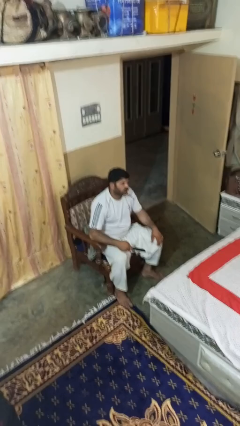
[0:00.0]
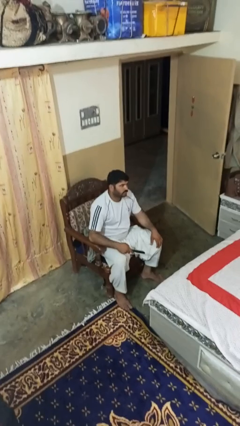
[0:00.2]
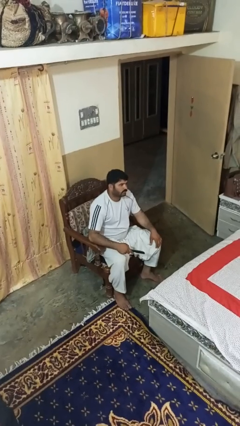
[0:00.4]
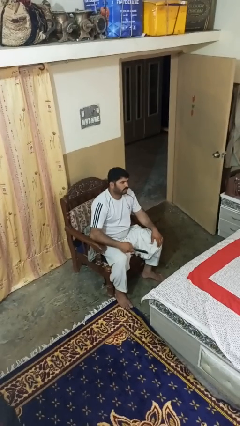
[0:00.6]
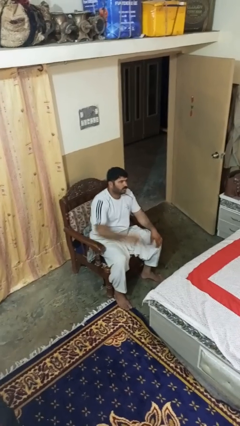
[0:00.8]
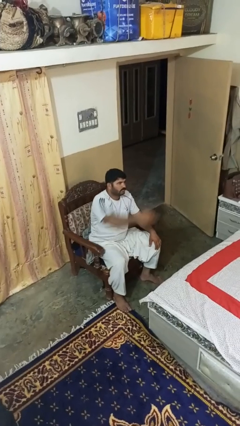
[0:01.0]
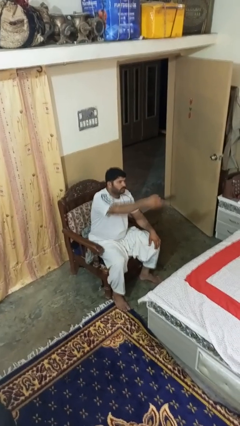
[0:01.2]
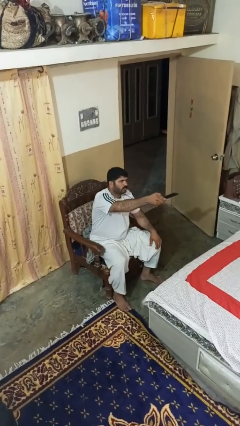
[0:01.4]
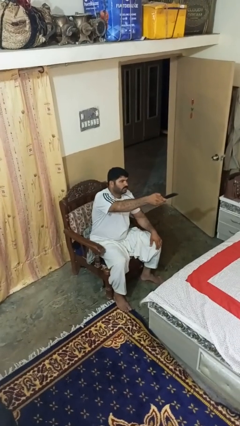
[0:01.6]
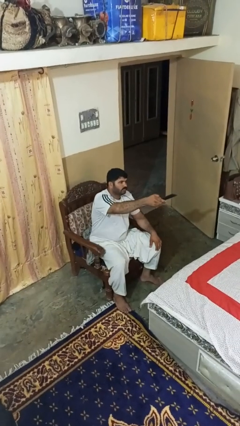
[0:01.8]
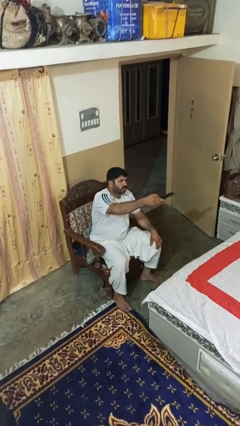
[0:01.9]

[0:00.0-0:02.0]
person uses television remote

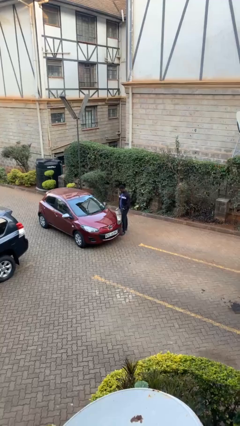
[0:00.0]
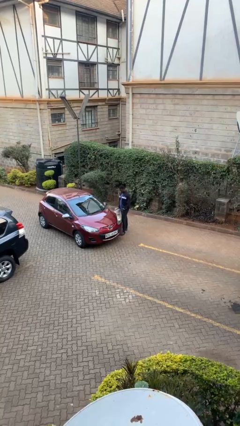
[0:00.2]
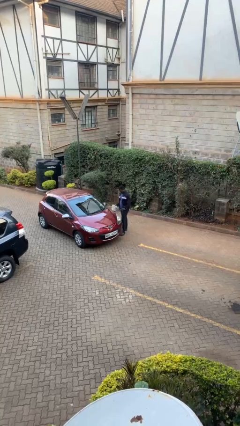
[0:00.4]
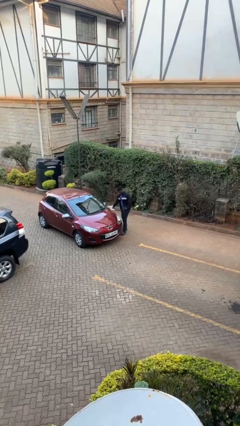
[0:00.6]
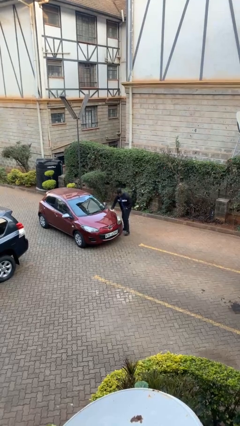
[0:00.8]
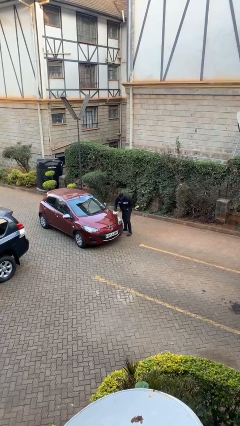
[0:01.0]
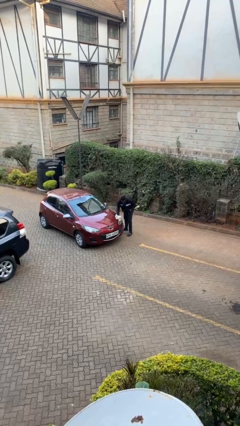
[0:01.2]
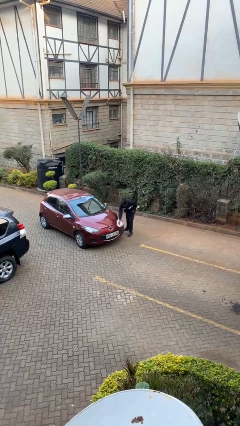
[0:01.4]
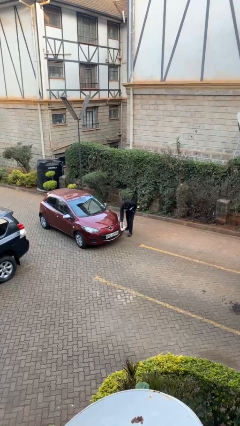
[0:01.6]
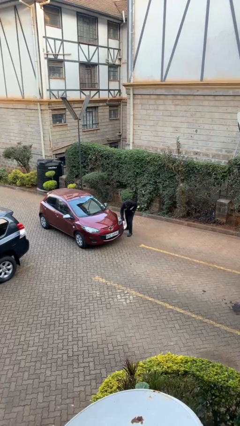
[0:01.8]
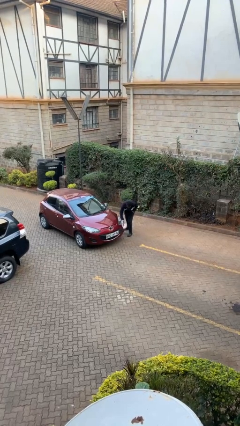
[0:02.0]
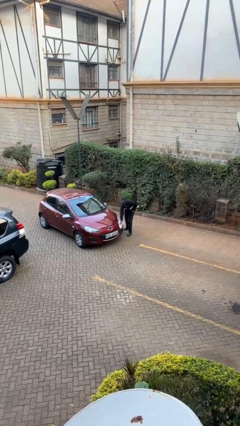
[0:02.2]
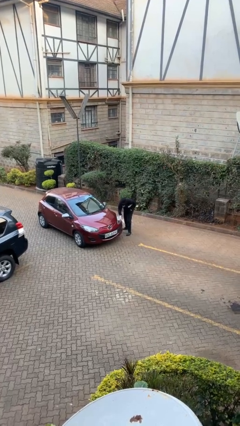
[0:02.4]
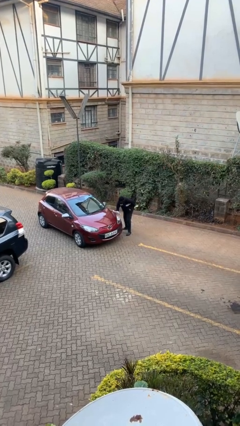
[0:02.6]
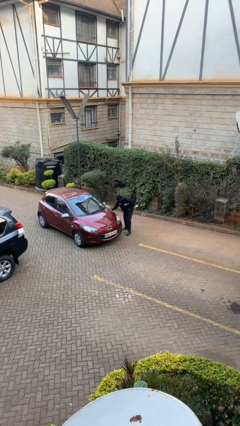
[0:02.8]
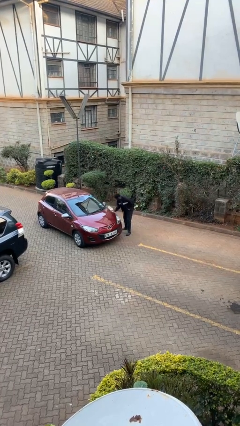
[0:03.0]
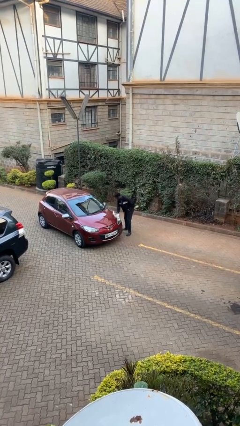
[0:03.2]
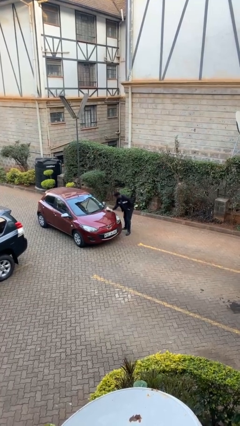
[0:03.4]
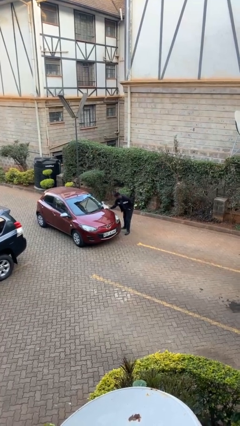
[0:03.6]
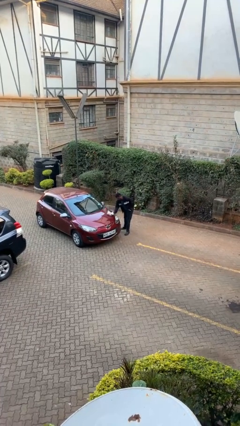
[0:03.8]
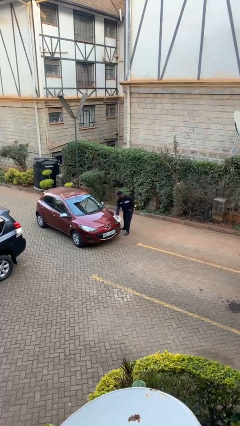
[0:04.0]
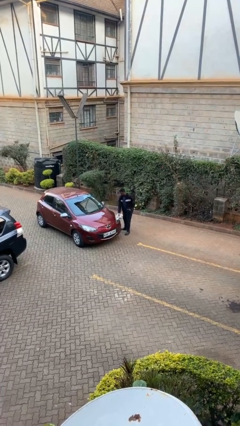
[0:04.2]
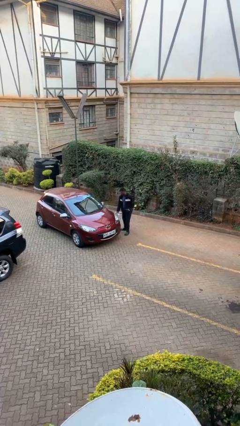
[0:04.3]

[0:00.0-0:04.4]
person polishes car with rag

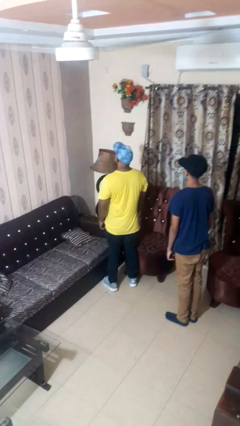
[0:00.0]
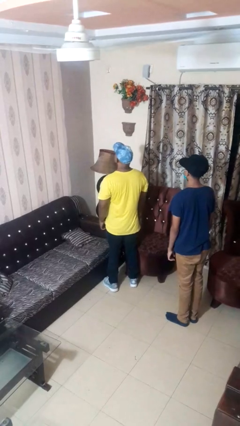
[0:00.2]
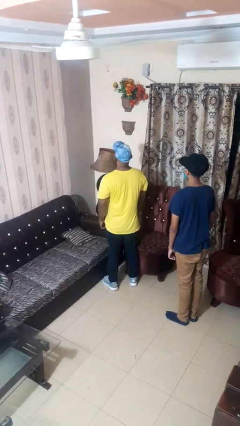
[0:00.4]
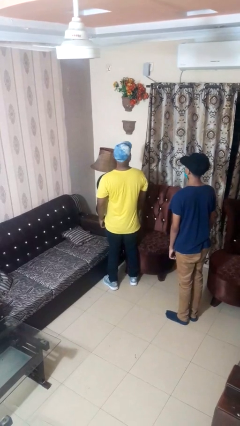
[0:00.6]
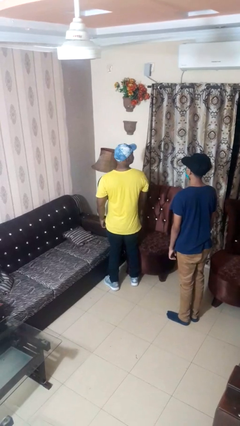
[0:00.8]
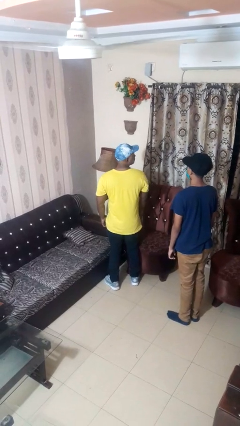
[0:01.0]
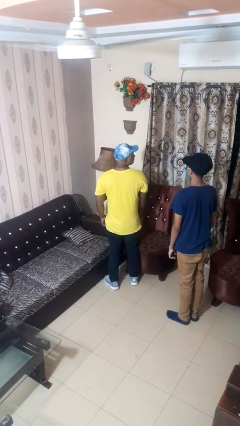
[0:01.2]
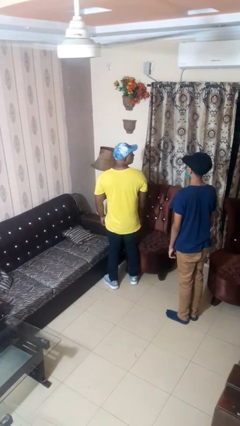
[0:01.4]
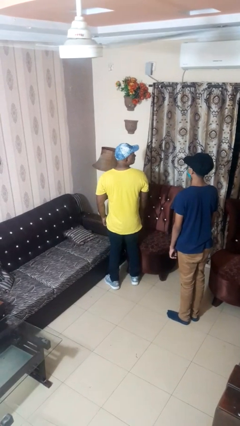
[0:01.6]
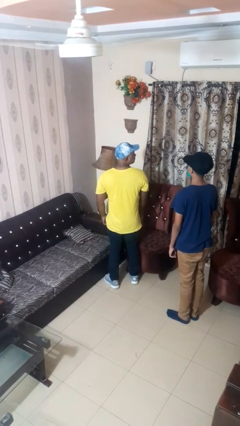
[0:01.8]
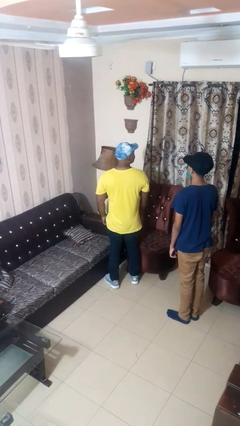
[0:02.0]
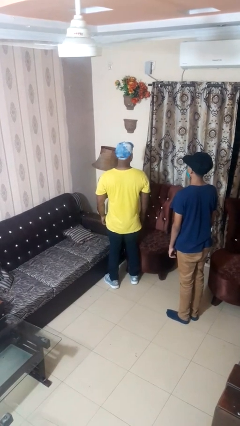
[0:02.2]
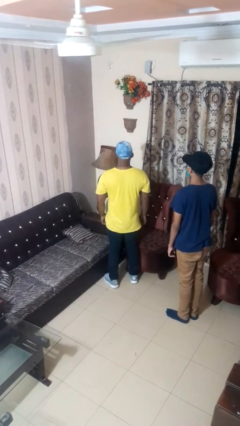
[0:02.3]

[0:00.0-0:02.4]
person looks over shoulder

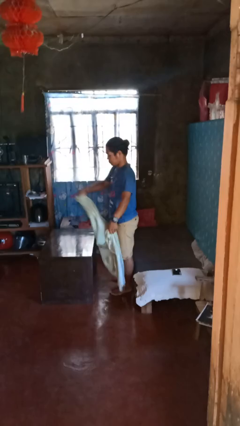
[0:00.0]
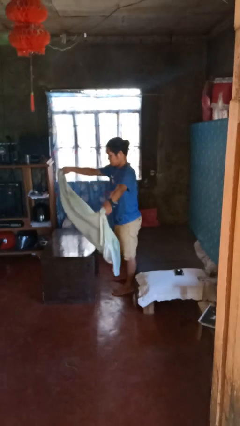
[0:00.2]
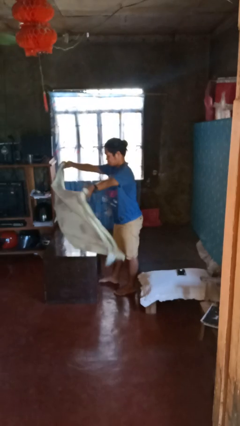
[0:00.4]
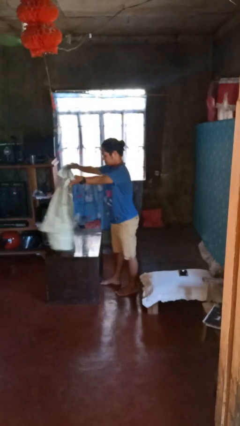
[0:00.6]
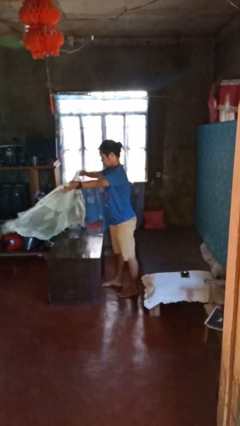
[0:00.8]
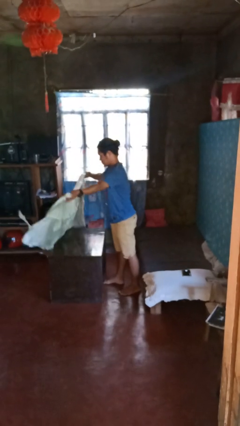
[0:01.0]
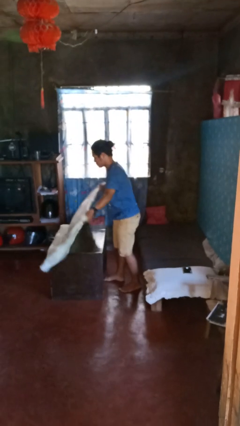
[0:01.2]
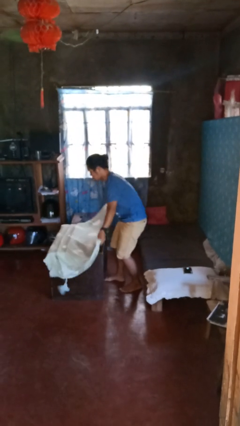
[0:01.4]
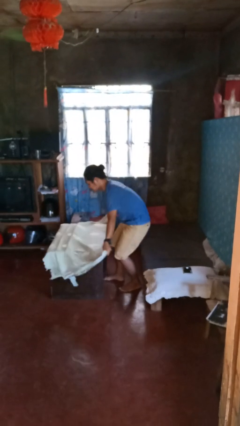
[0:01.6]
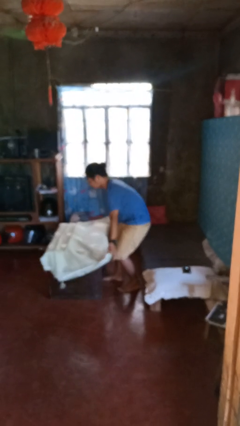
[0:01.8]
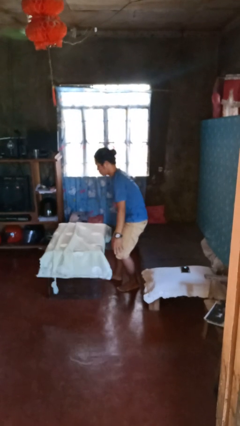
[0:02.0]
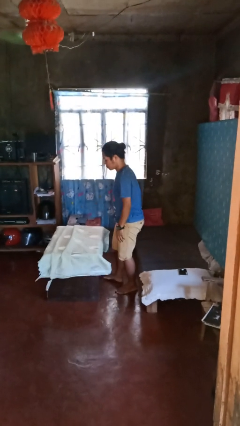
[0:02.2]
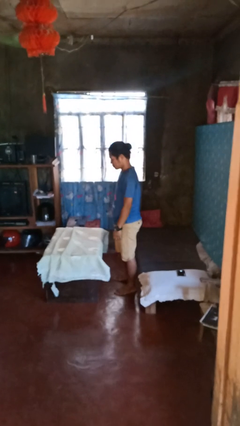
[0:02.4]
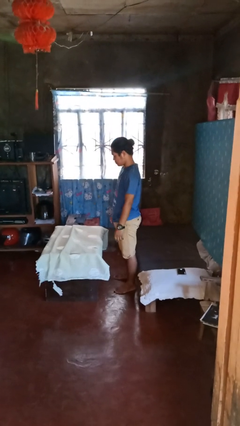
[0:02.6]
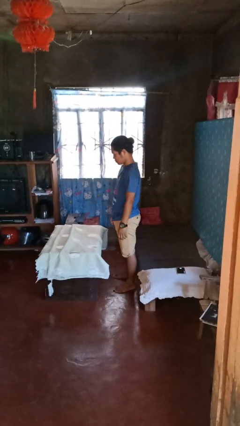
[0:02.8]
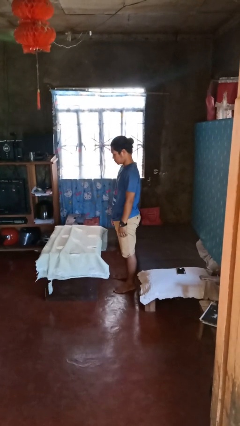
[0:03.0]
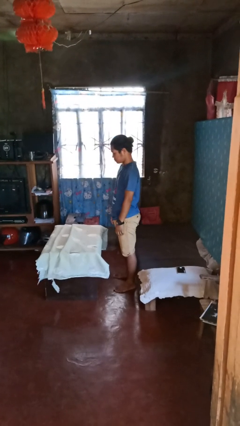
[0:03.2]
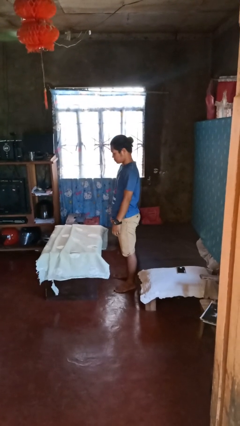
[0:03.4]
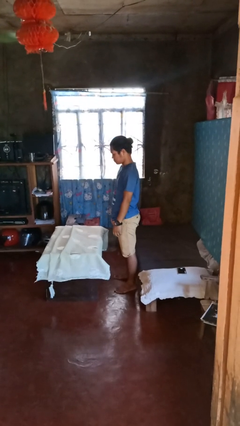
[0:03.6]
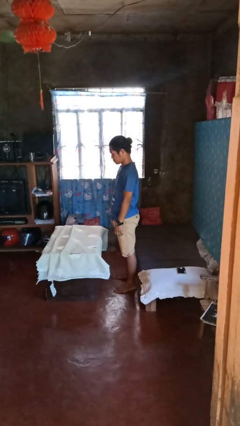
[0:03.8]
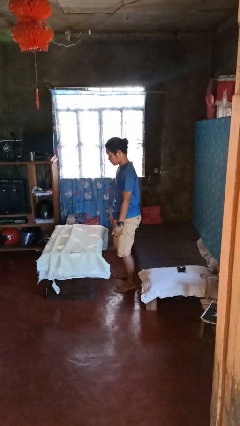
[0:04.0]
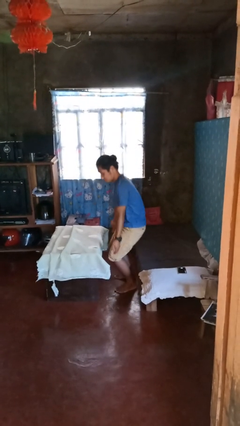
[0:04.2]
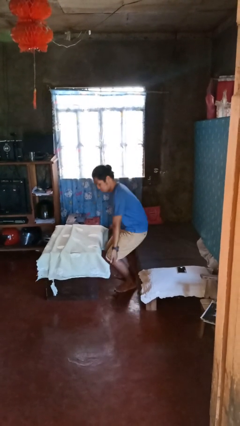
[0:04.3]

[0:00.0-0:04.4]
person spreads tablecloth

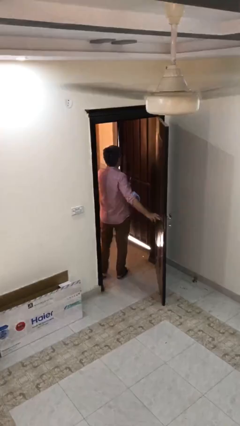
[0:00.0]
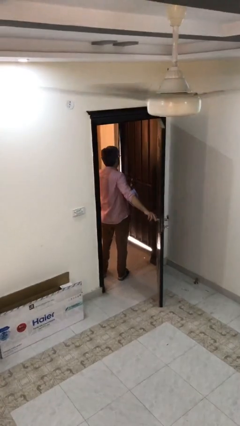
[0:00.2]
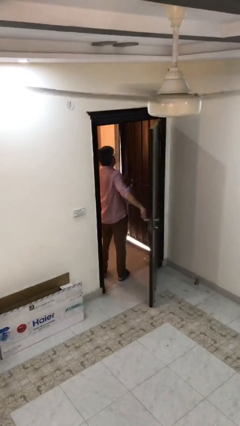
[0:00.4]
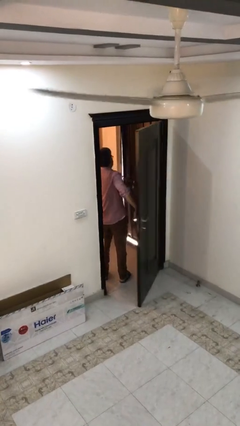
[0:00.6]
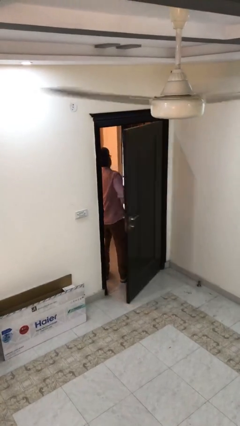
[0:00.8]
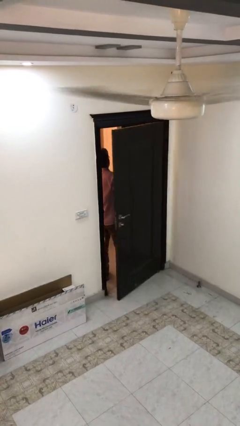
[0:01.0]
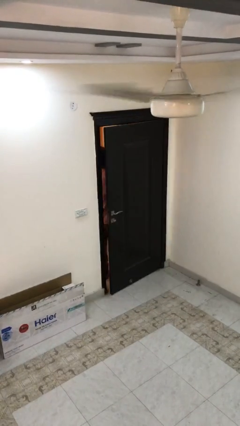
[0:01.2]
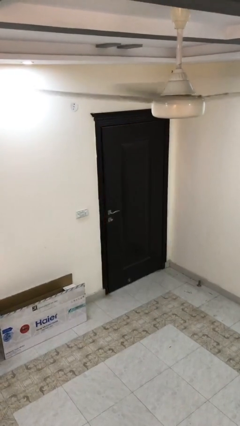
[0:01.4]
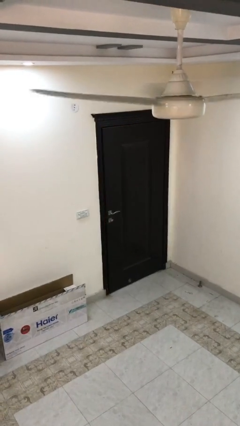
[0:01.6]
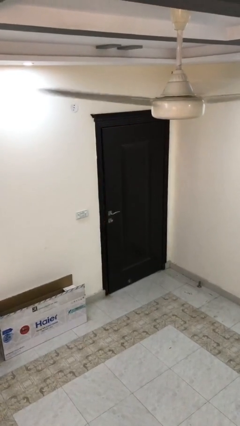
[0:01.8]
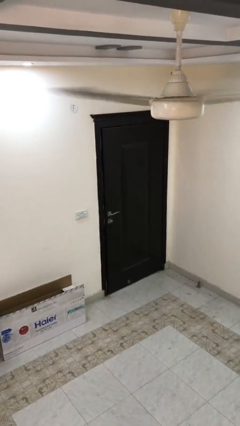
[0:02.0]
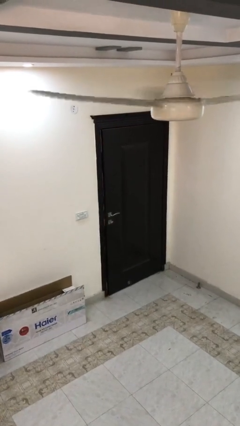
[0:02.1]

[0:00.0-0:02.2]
person closes facility door

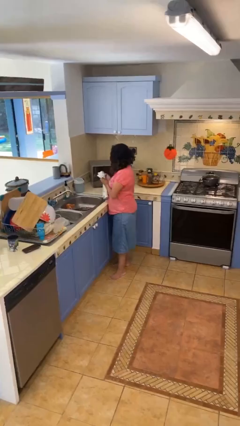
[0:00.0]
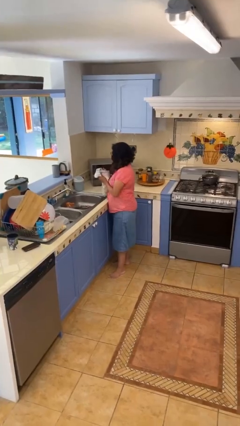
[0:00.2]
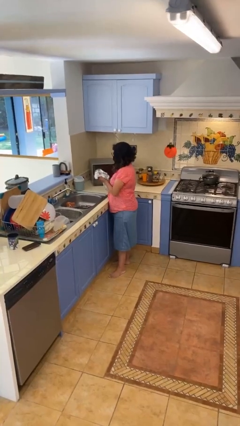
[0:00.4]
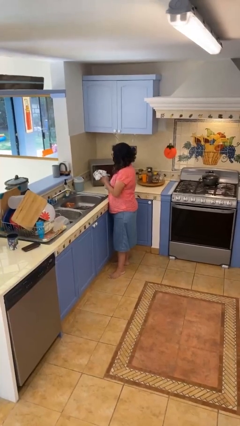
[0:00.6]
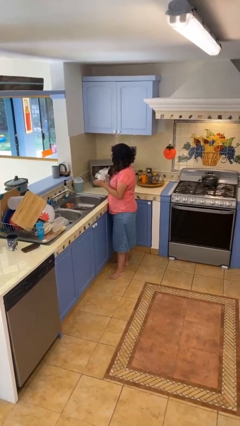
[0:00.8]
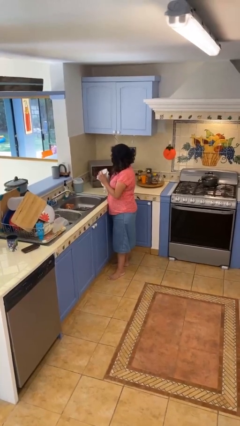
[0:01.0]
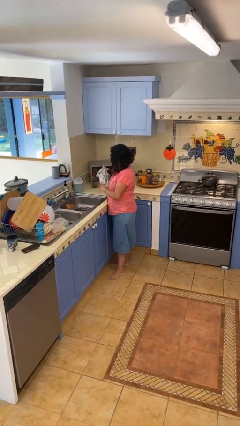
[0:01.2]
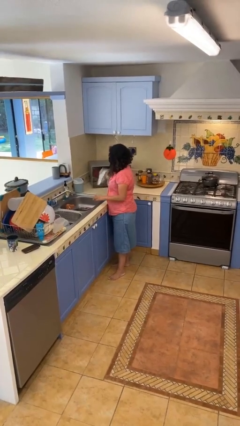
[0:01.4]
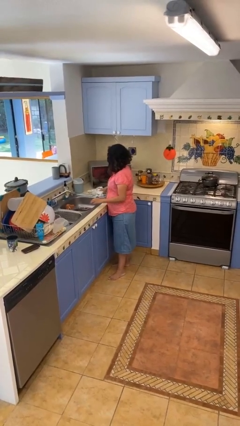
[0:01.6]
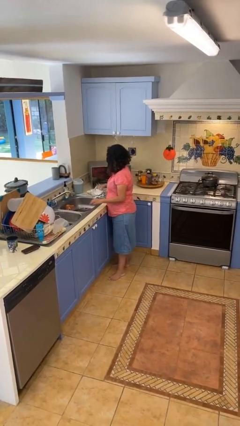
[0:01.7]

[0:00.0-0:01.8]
person dries hands with towel

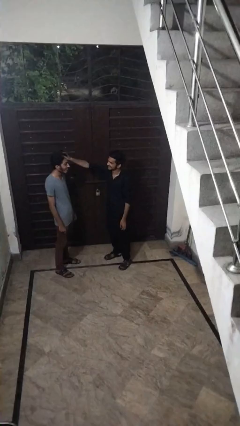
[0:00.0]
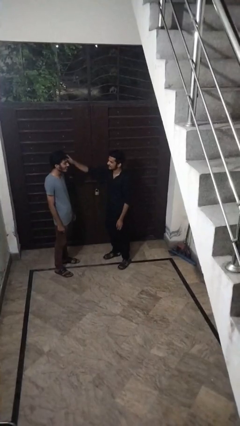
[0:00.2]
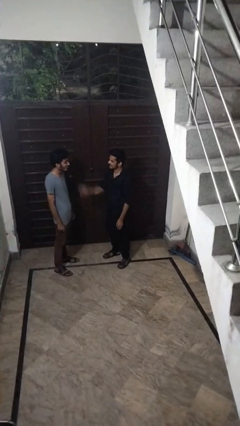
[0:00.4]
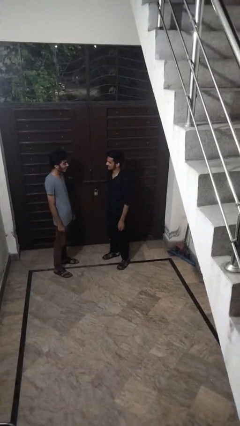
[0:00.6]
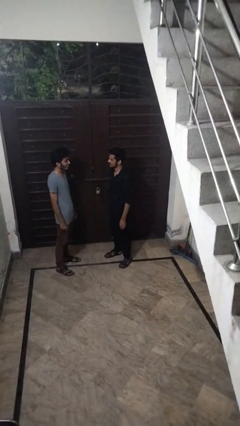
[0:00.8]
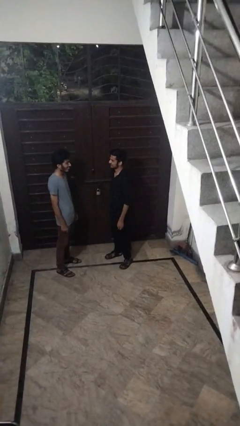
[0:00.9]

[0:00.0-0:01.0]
person grabs person by hair
